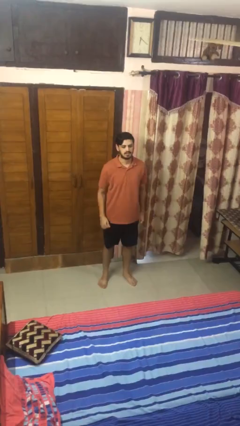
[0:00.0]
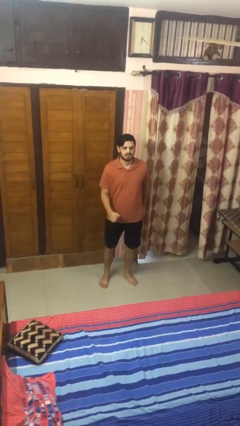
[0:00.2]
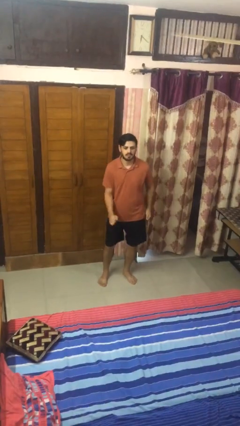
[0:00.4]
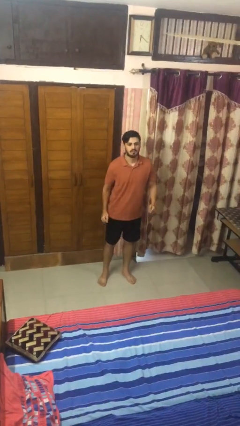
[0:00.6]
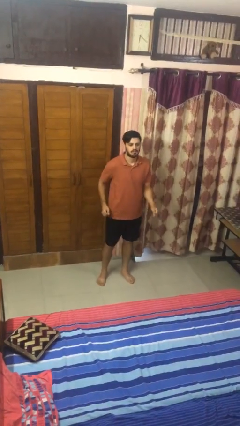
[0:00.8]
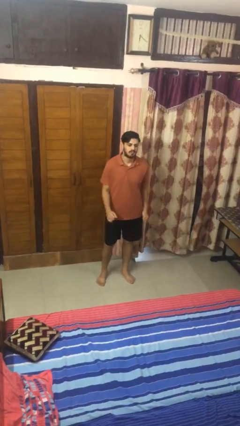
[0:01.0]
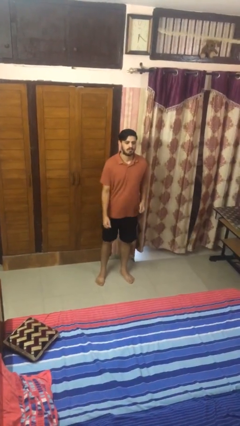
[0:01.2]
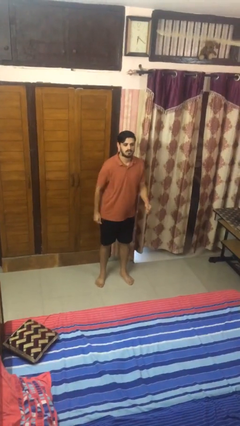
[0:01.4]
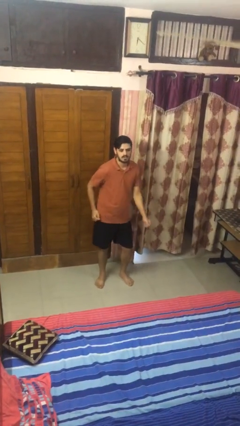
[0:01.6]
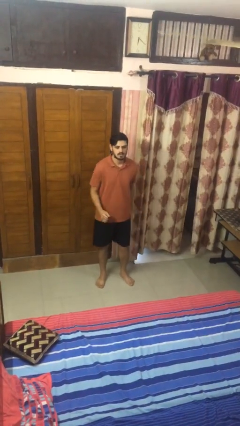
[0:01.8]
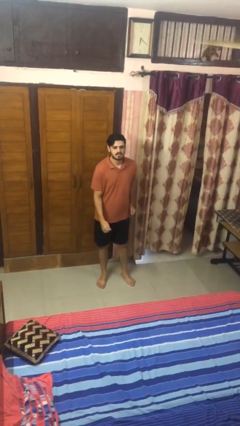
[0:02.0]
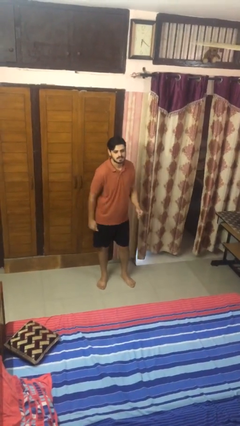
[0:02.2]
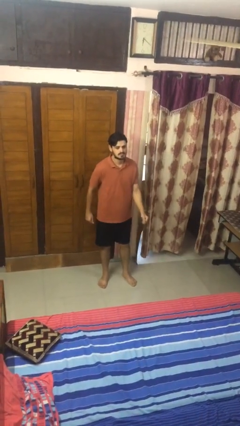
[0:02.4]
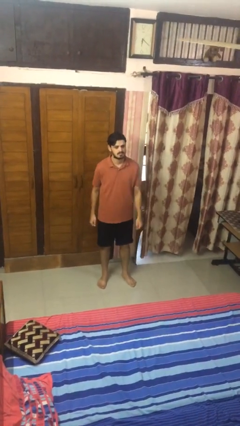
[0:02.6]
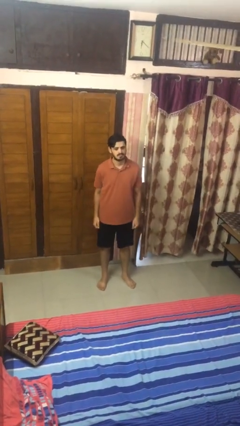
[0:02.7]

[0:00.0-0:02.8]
person dances in place

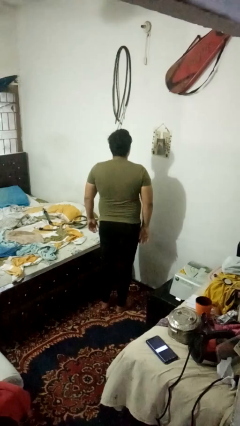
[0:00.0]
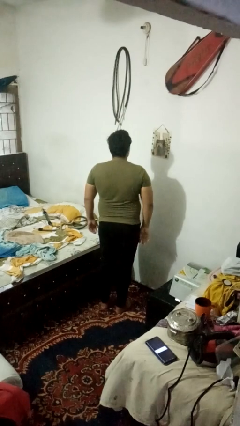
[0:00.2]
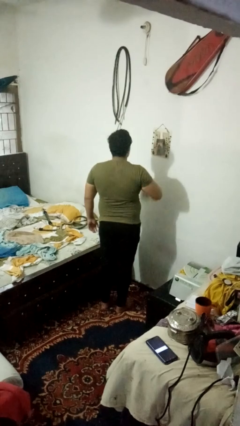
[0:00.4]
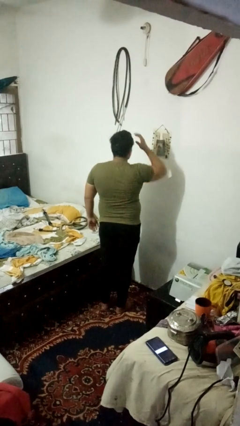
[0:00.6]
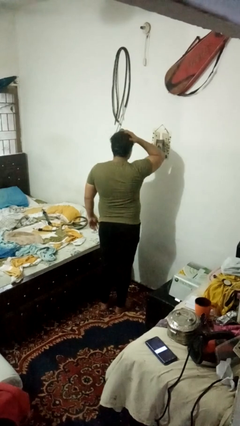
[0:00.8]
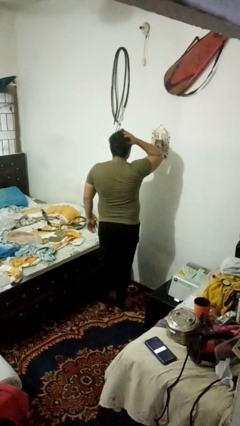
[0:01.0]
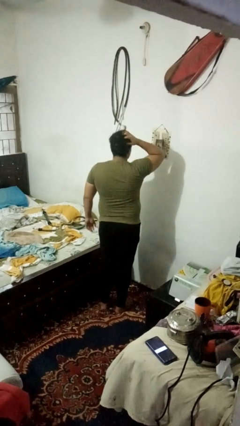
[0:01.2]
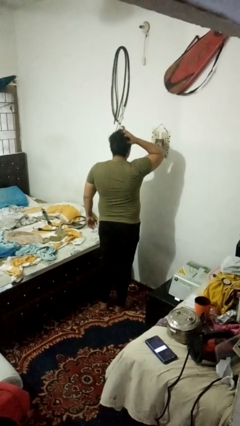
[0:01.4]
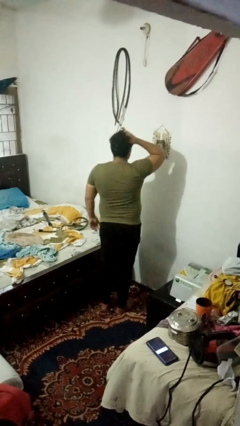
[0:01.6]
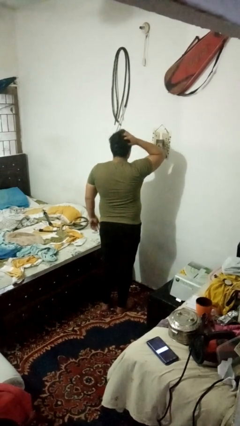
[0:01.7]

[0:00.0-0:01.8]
person strokes hair

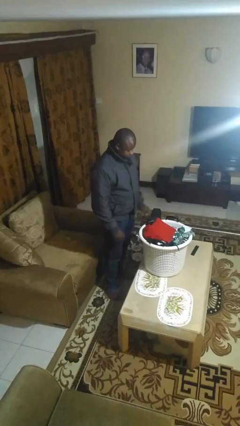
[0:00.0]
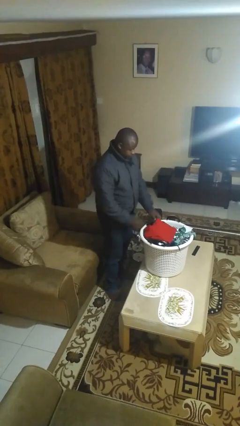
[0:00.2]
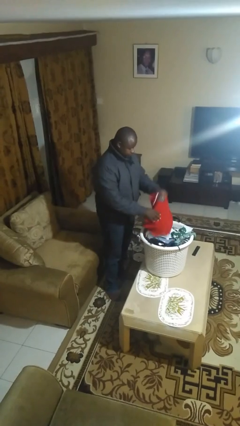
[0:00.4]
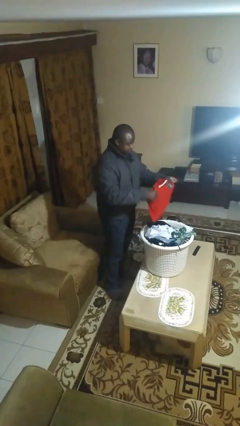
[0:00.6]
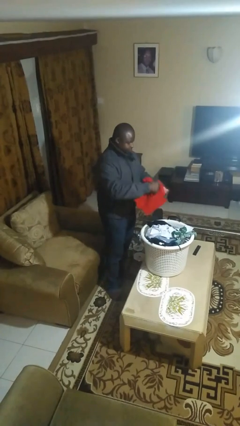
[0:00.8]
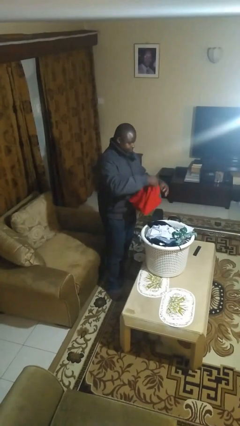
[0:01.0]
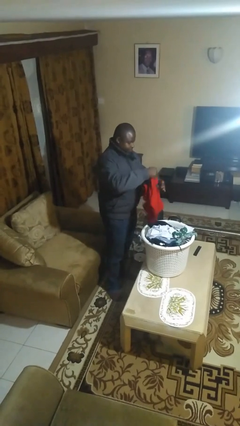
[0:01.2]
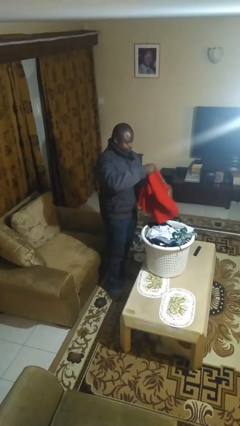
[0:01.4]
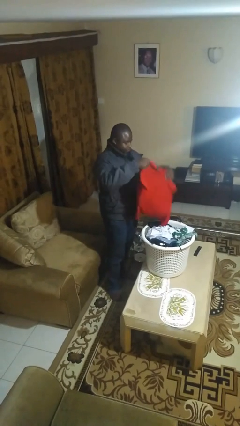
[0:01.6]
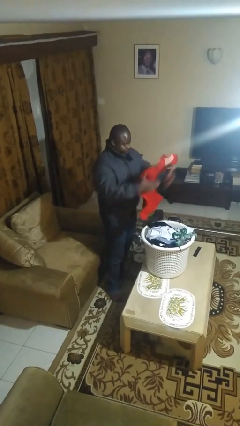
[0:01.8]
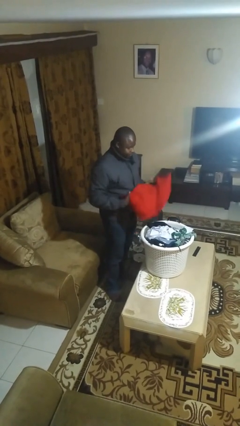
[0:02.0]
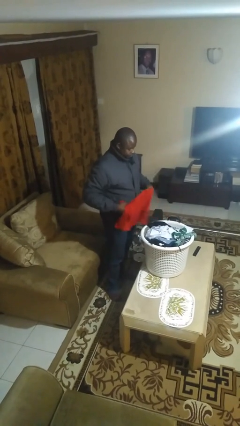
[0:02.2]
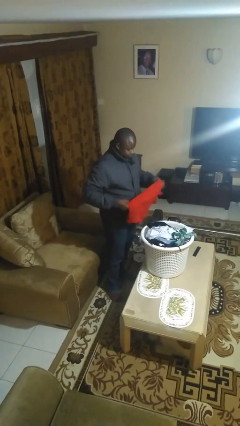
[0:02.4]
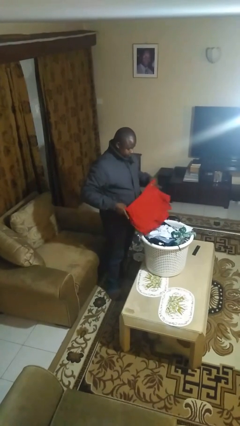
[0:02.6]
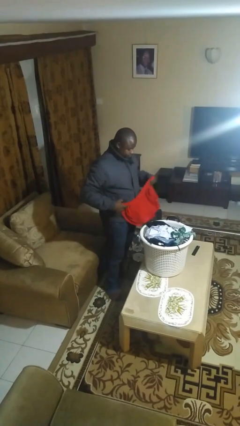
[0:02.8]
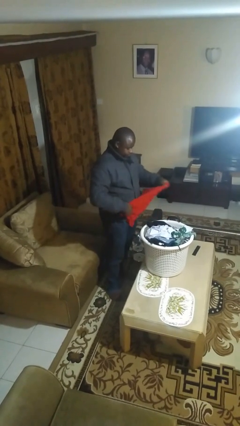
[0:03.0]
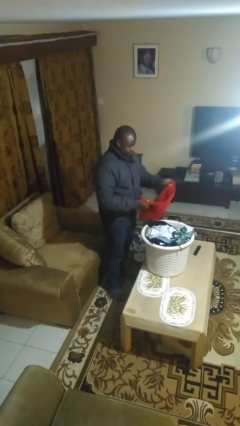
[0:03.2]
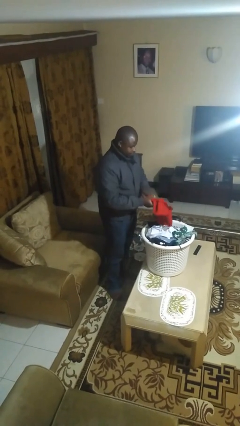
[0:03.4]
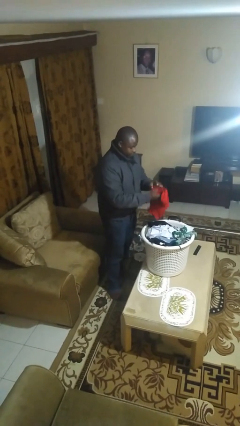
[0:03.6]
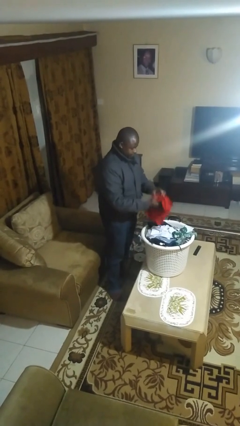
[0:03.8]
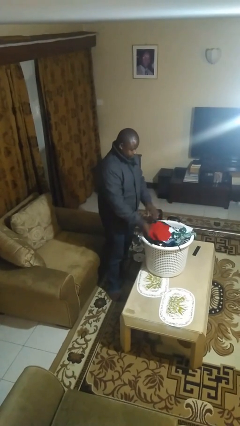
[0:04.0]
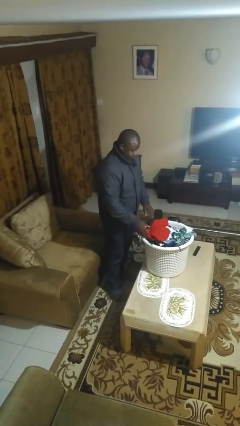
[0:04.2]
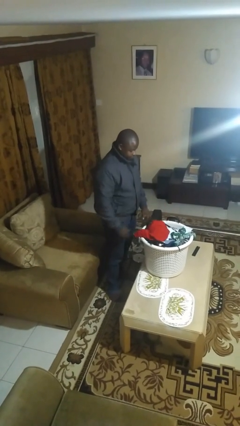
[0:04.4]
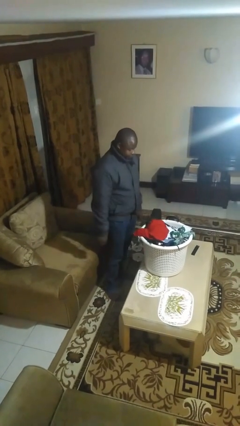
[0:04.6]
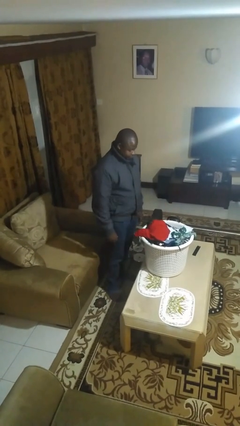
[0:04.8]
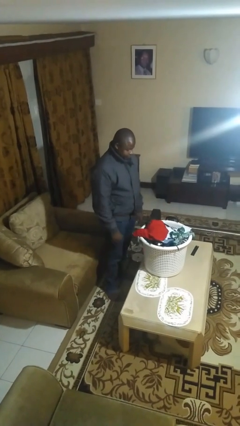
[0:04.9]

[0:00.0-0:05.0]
person folds shirt

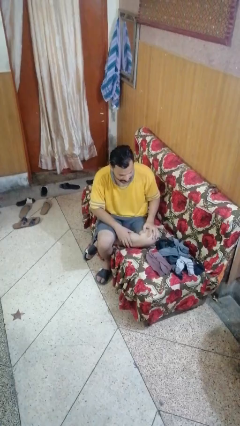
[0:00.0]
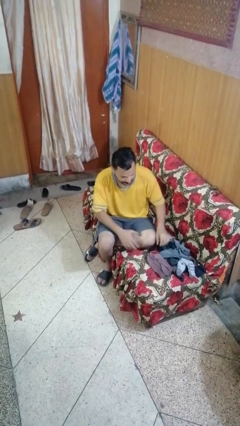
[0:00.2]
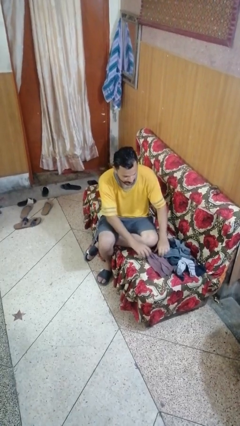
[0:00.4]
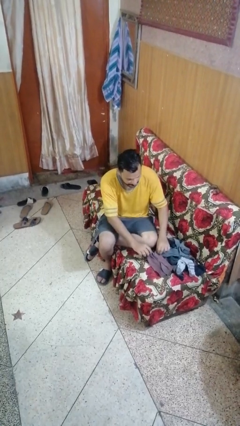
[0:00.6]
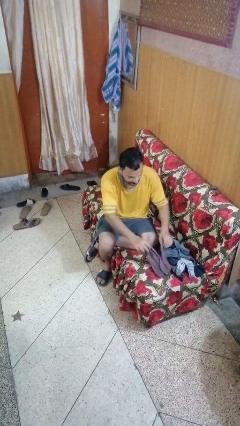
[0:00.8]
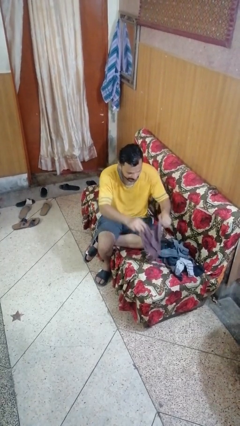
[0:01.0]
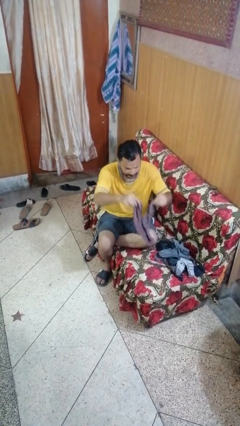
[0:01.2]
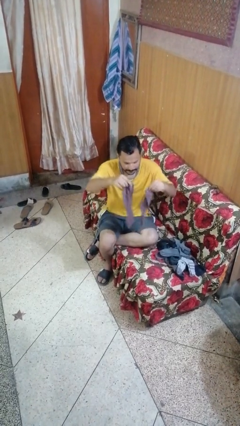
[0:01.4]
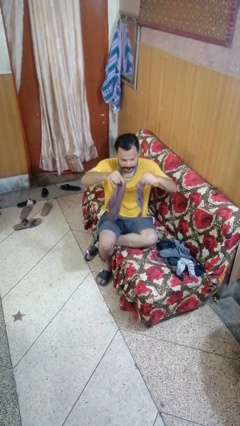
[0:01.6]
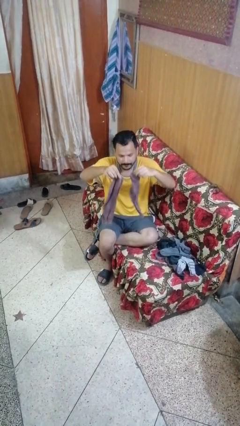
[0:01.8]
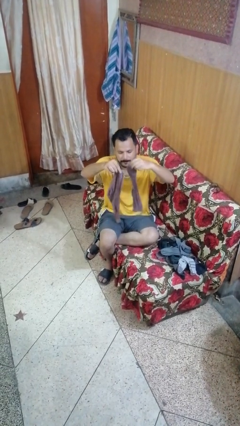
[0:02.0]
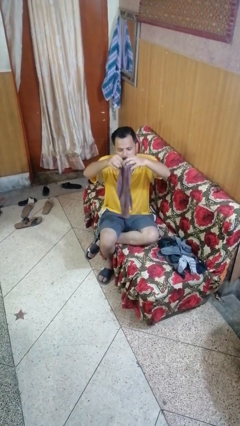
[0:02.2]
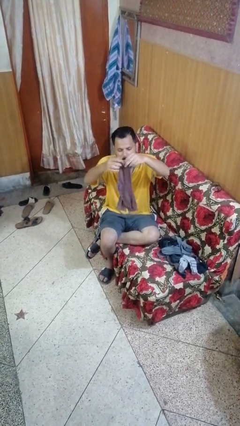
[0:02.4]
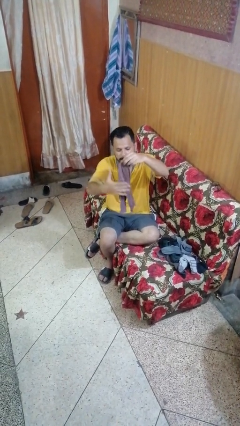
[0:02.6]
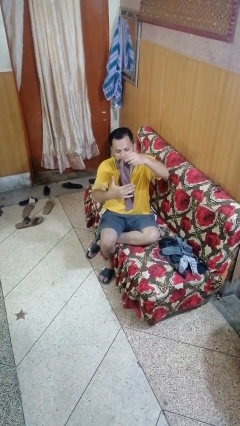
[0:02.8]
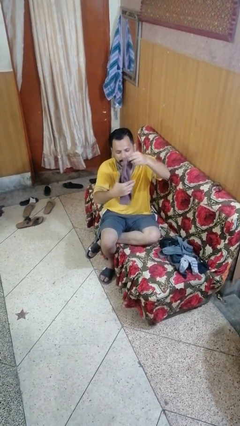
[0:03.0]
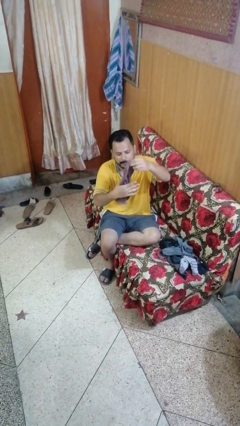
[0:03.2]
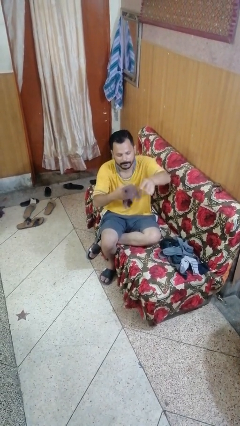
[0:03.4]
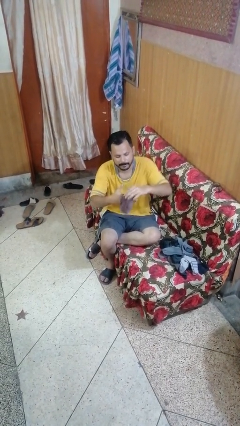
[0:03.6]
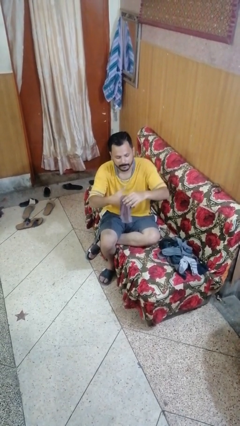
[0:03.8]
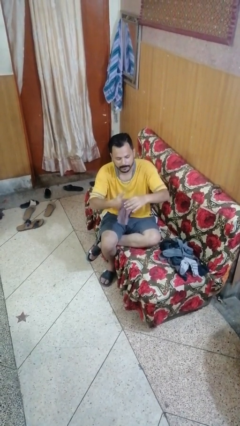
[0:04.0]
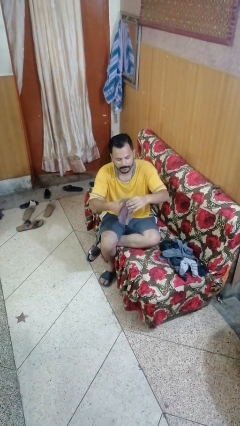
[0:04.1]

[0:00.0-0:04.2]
person folds socks

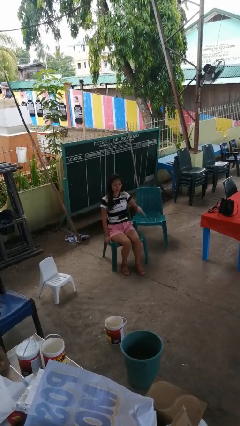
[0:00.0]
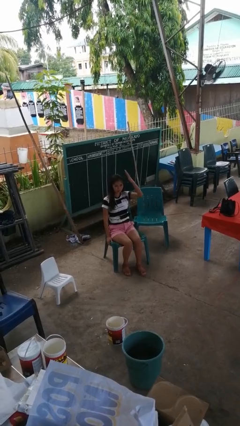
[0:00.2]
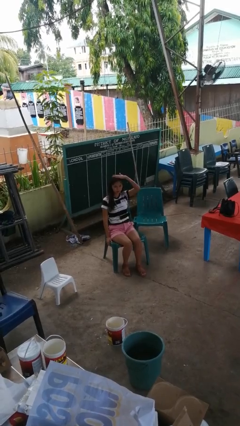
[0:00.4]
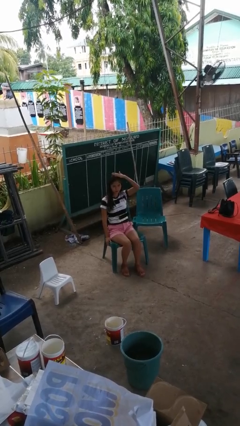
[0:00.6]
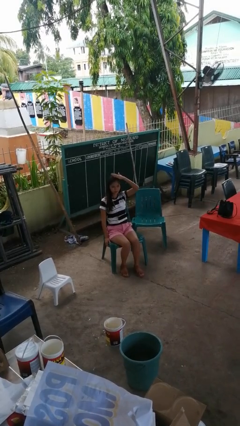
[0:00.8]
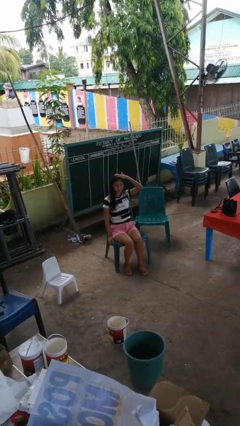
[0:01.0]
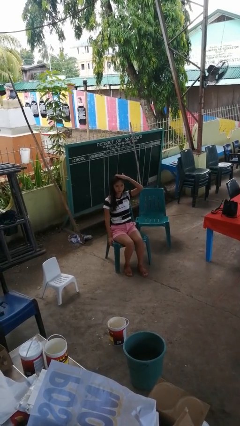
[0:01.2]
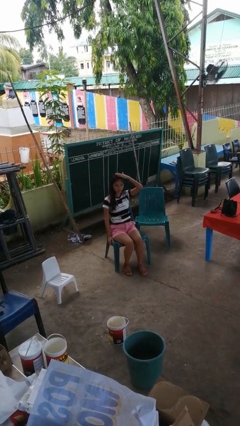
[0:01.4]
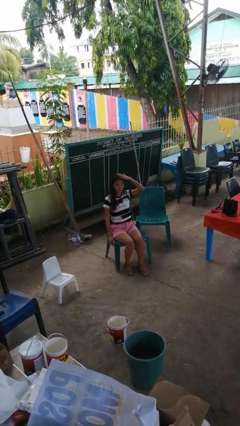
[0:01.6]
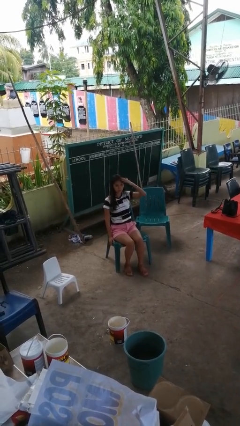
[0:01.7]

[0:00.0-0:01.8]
person pats head

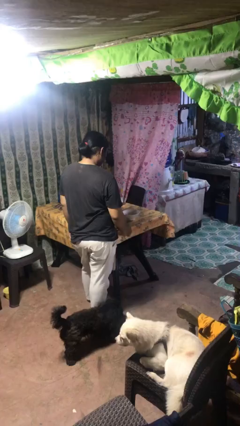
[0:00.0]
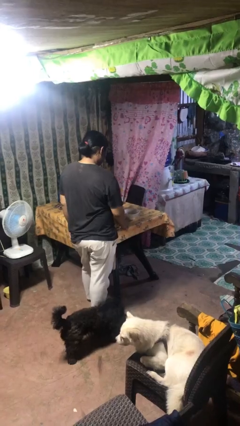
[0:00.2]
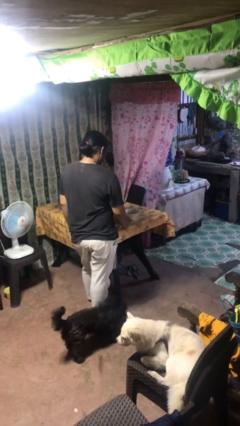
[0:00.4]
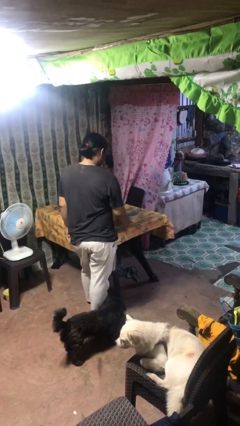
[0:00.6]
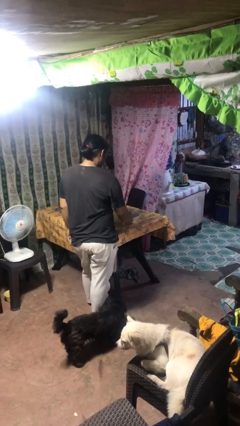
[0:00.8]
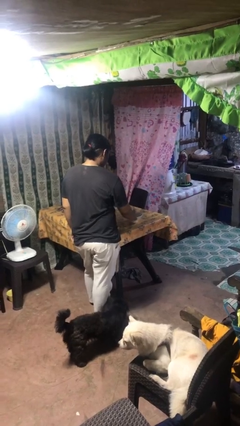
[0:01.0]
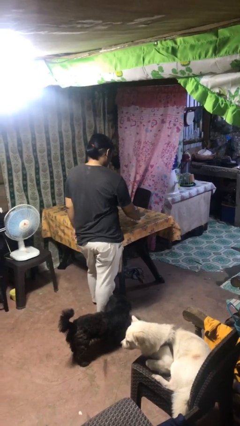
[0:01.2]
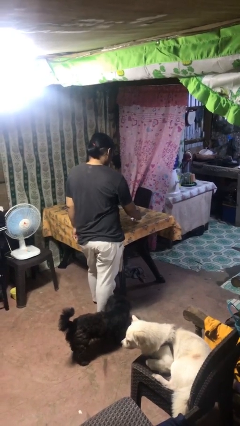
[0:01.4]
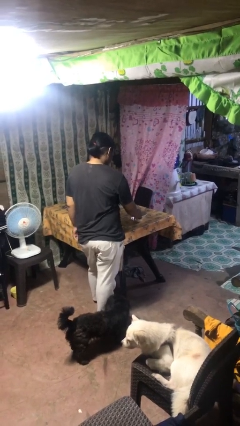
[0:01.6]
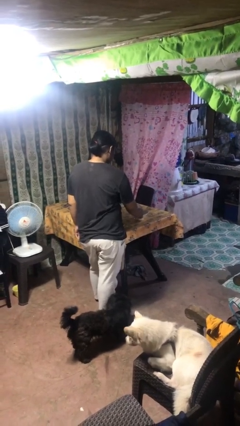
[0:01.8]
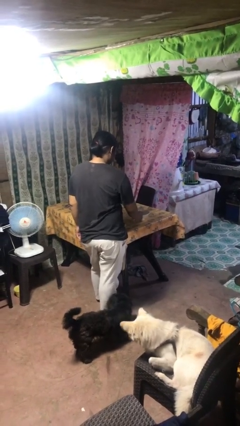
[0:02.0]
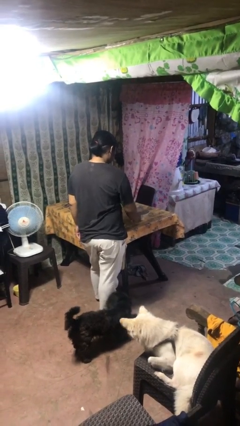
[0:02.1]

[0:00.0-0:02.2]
person pours into bowl
